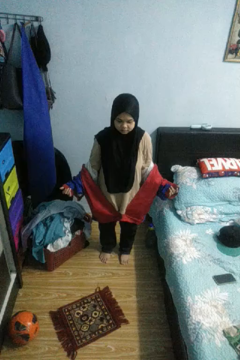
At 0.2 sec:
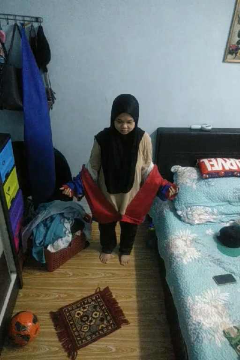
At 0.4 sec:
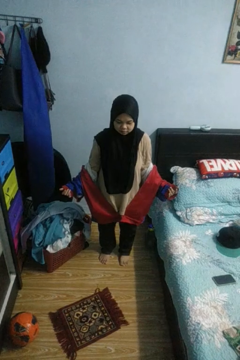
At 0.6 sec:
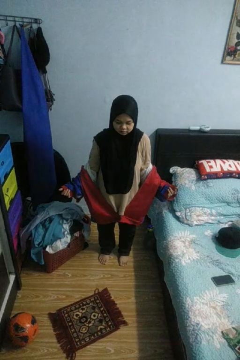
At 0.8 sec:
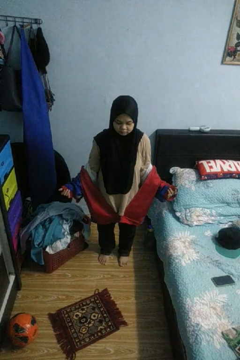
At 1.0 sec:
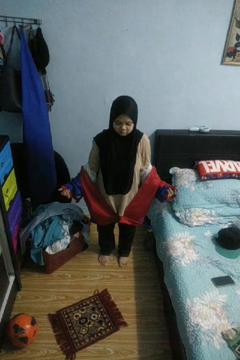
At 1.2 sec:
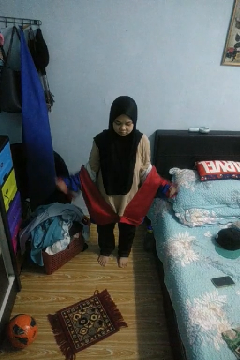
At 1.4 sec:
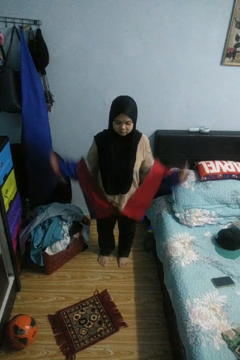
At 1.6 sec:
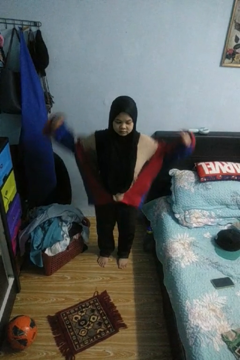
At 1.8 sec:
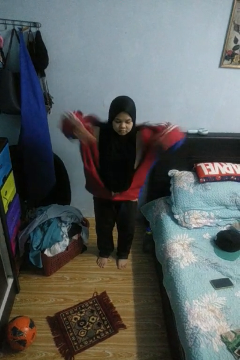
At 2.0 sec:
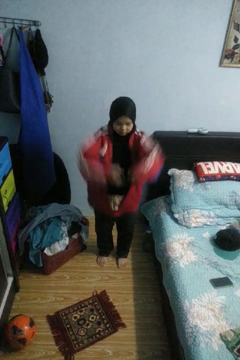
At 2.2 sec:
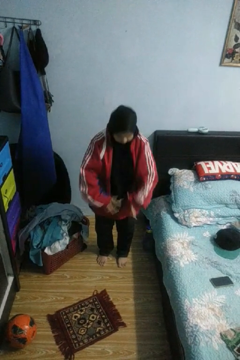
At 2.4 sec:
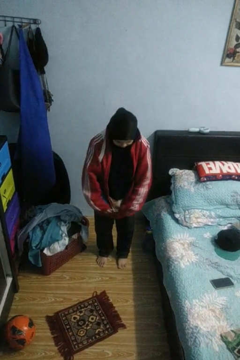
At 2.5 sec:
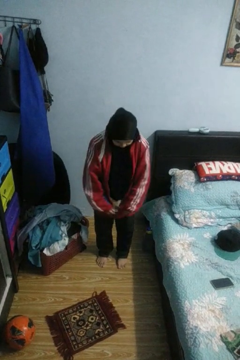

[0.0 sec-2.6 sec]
person puts on jacket

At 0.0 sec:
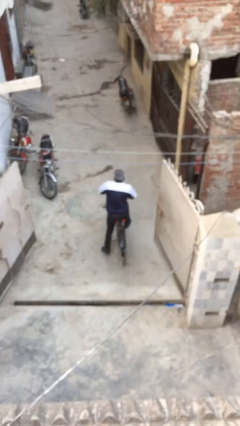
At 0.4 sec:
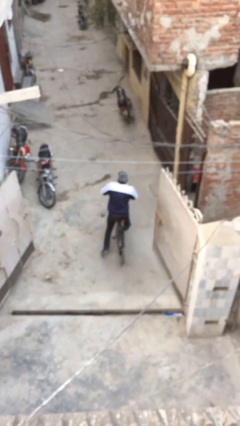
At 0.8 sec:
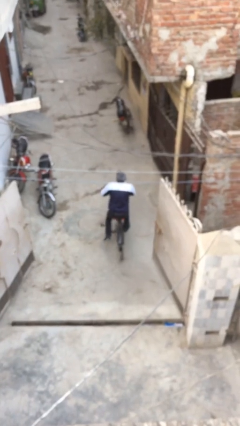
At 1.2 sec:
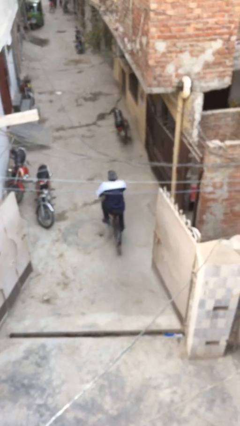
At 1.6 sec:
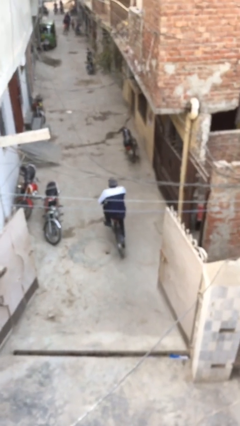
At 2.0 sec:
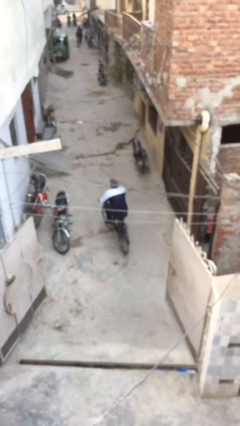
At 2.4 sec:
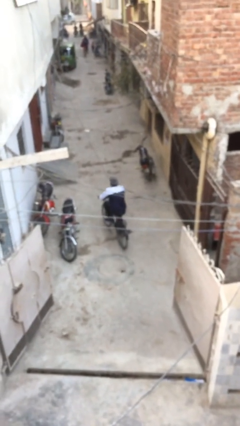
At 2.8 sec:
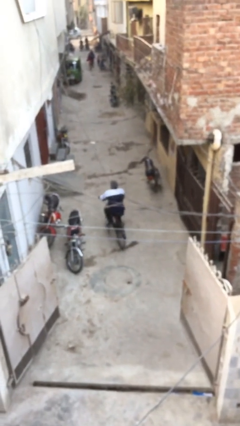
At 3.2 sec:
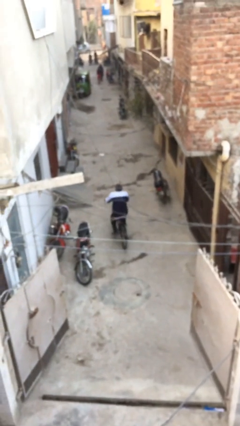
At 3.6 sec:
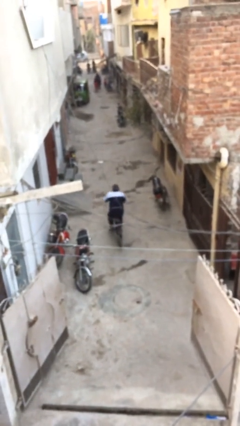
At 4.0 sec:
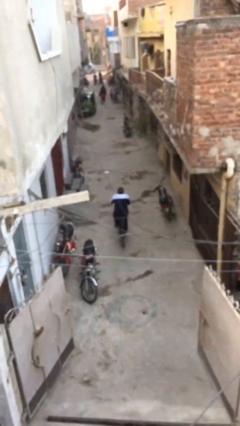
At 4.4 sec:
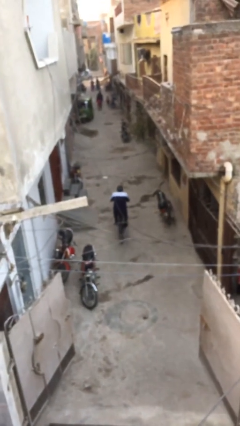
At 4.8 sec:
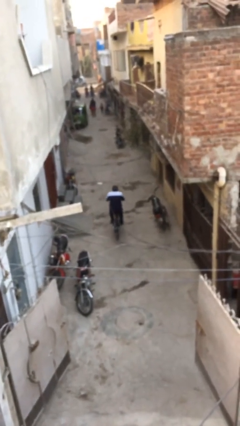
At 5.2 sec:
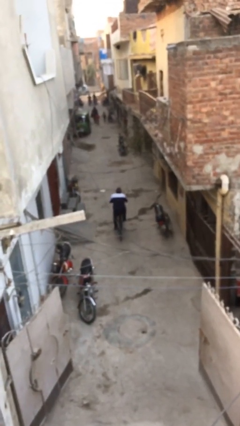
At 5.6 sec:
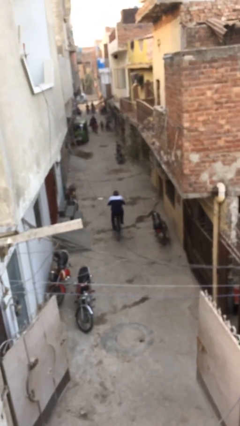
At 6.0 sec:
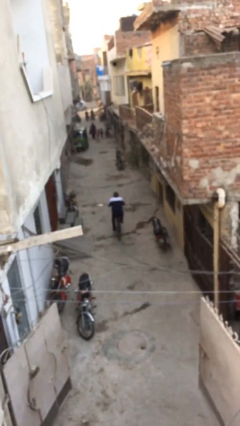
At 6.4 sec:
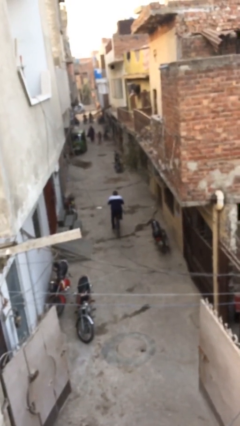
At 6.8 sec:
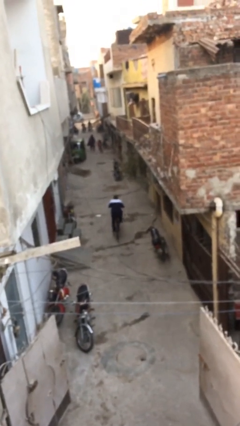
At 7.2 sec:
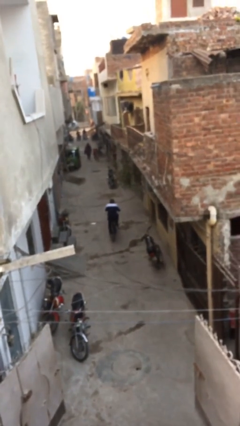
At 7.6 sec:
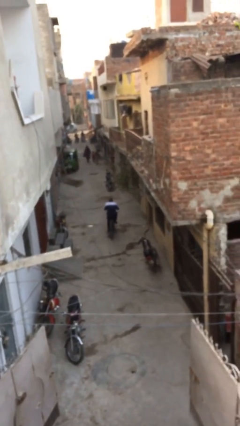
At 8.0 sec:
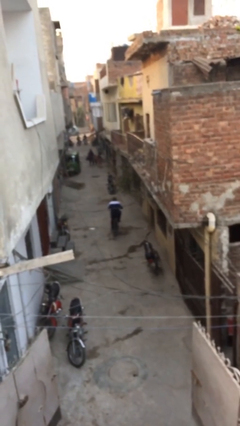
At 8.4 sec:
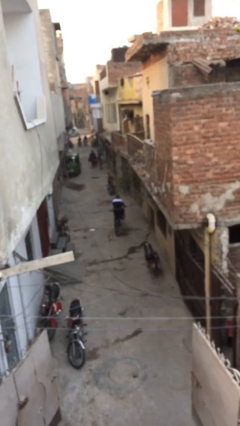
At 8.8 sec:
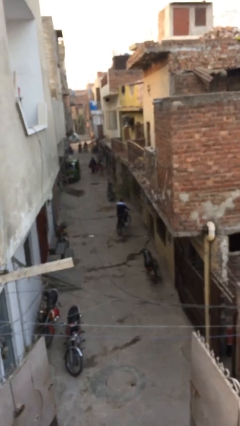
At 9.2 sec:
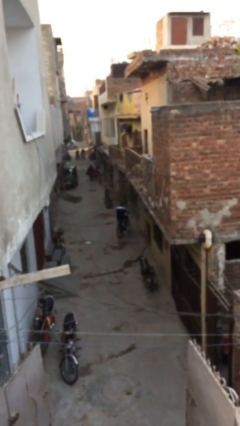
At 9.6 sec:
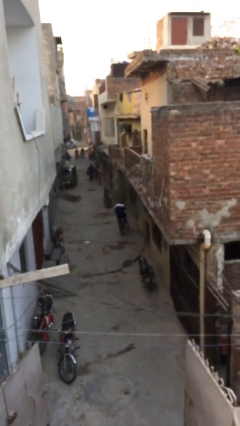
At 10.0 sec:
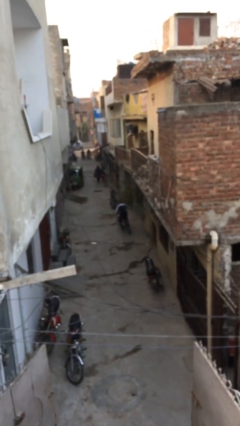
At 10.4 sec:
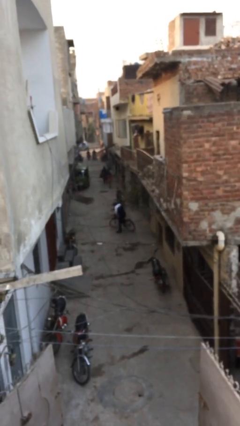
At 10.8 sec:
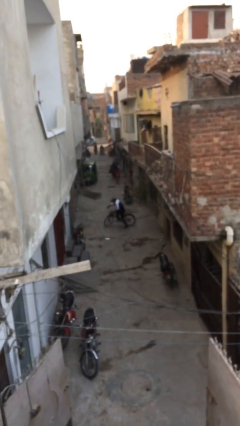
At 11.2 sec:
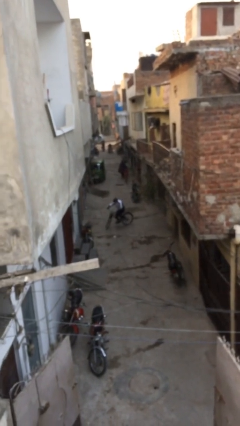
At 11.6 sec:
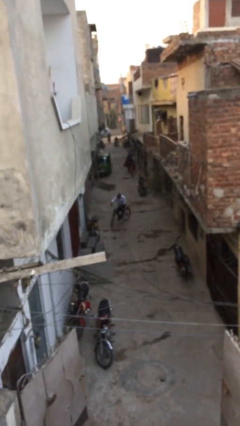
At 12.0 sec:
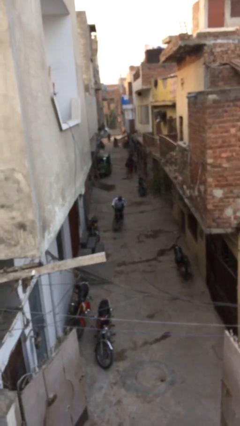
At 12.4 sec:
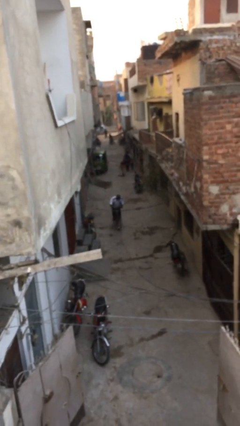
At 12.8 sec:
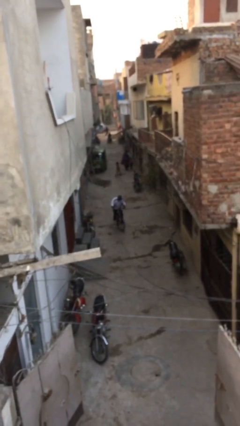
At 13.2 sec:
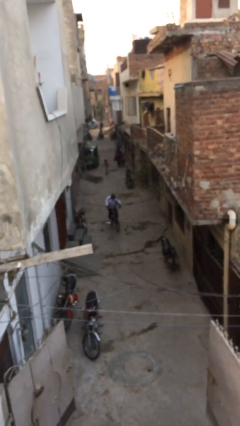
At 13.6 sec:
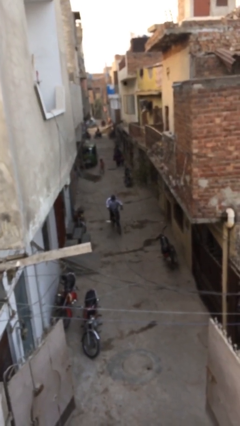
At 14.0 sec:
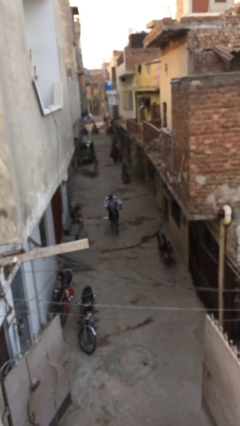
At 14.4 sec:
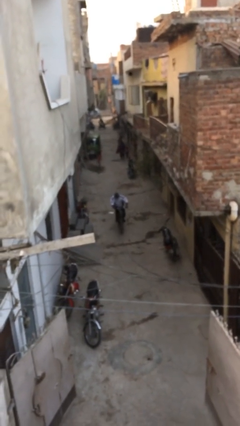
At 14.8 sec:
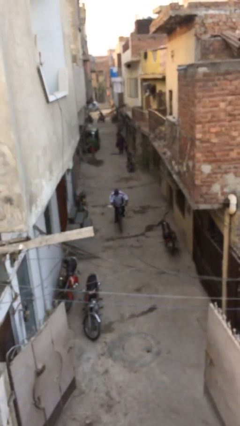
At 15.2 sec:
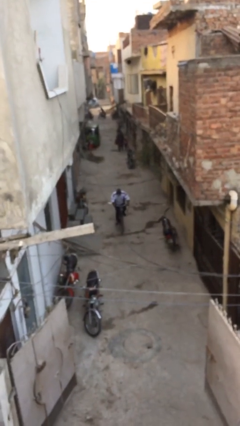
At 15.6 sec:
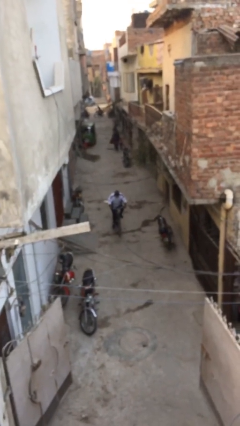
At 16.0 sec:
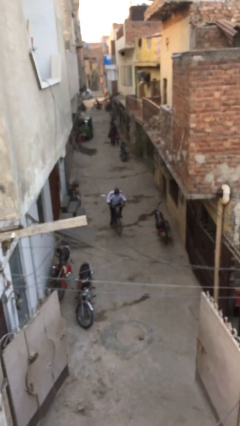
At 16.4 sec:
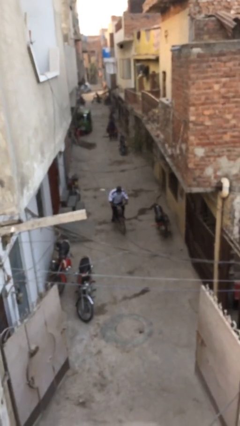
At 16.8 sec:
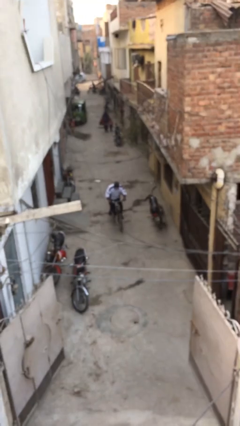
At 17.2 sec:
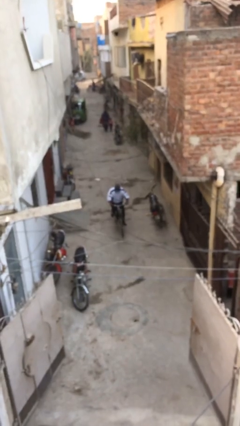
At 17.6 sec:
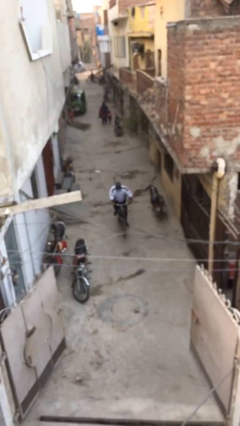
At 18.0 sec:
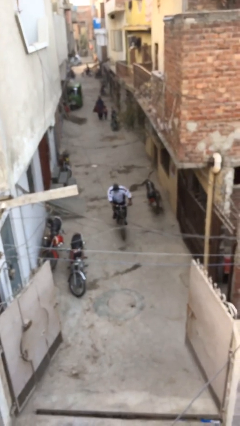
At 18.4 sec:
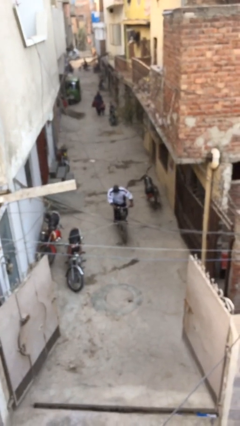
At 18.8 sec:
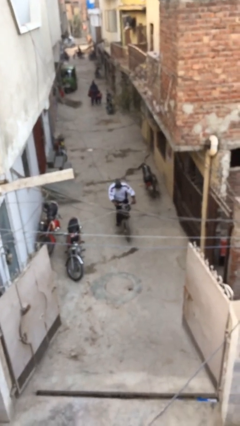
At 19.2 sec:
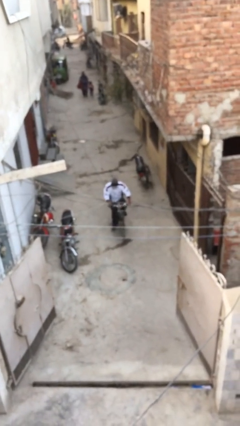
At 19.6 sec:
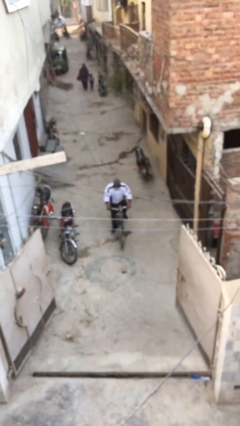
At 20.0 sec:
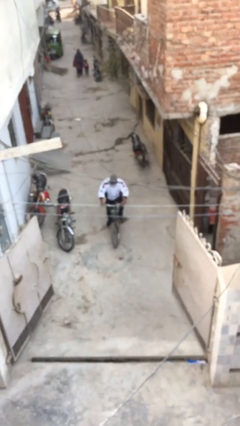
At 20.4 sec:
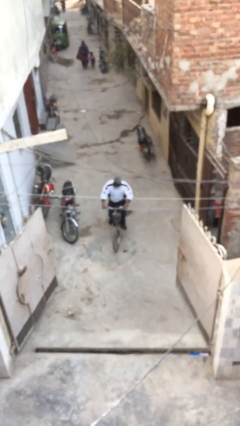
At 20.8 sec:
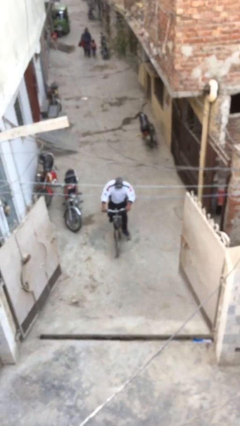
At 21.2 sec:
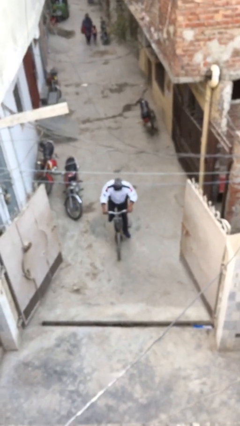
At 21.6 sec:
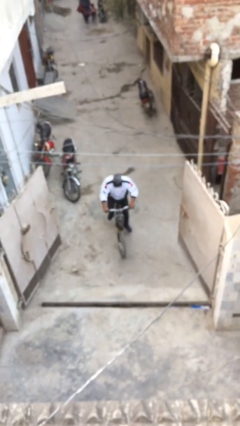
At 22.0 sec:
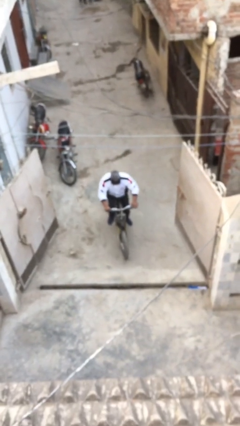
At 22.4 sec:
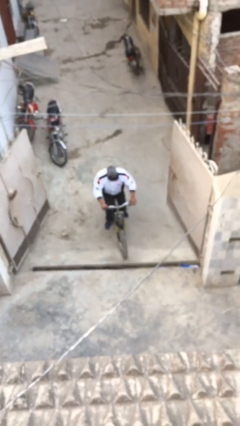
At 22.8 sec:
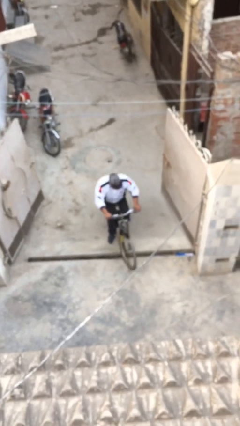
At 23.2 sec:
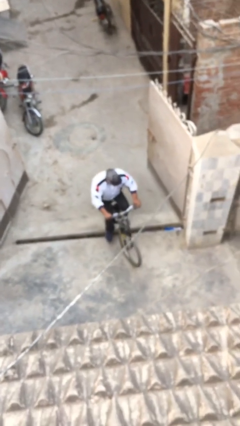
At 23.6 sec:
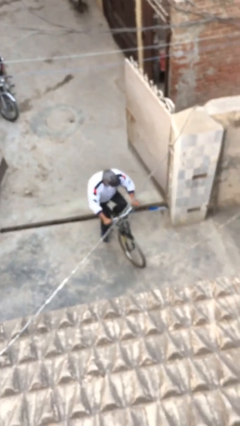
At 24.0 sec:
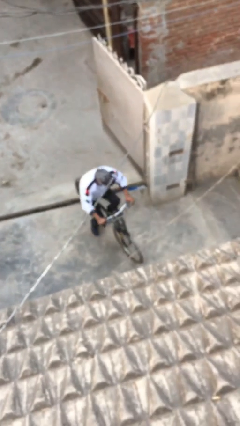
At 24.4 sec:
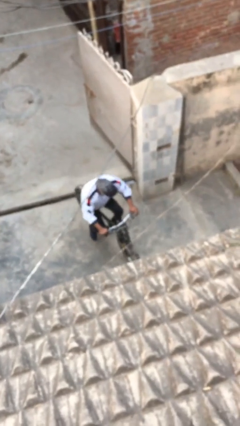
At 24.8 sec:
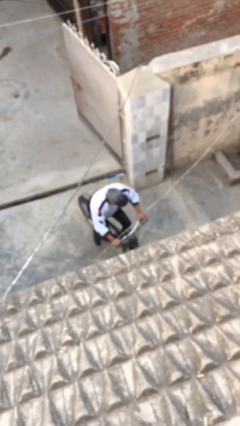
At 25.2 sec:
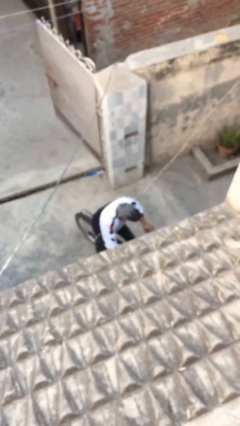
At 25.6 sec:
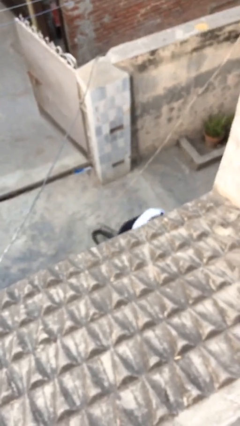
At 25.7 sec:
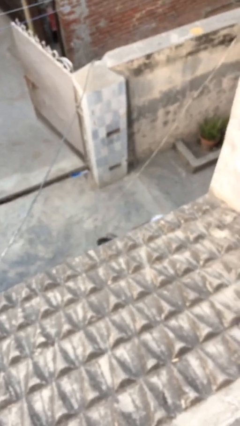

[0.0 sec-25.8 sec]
person rides bicycle

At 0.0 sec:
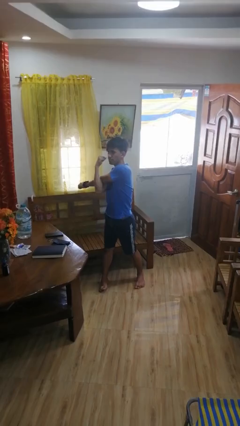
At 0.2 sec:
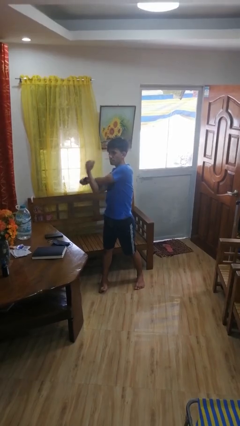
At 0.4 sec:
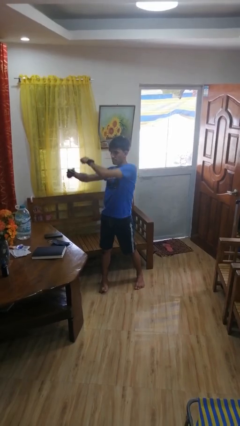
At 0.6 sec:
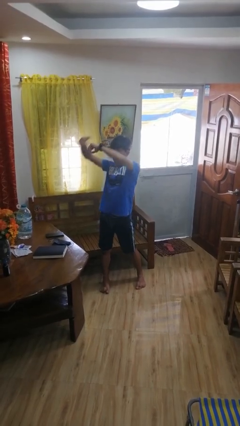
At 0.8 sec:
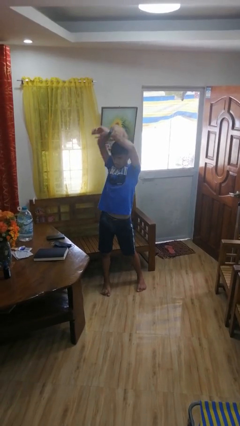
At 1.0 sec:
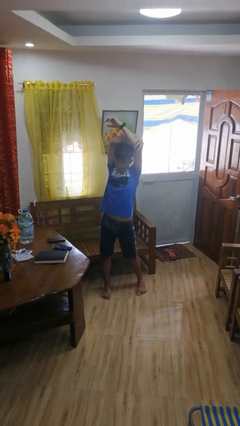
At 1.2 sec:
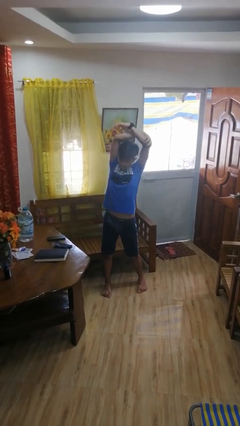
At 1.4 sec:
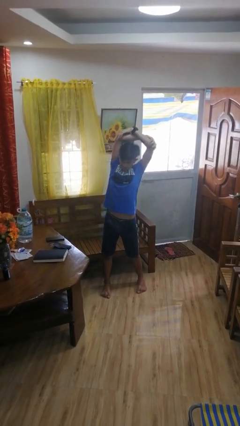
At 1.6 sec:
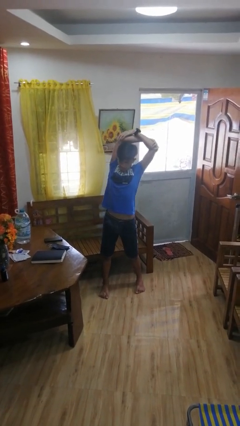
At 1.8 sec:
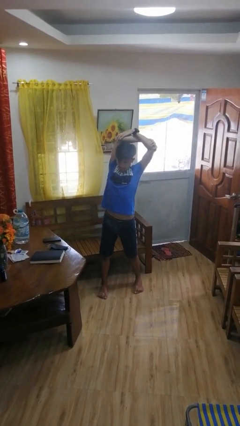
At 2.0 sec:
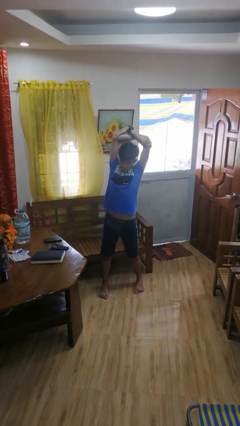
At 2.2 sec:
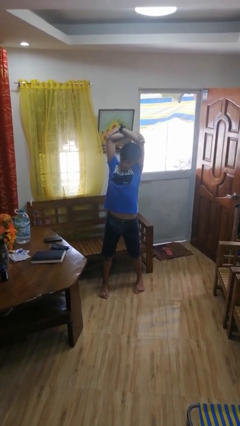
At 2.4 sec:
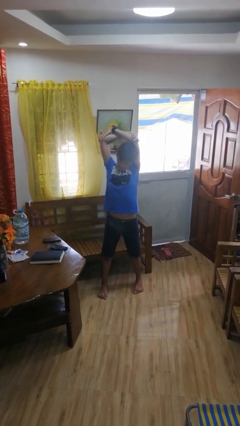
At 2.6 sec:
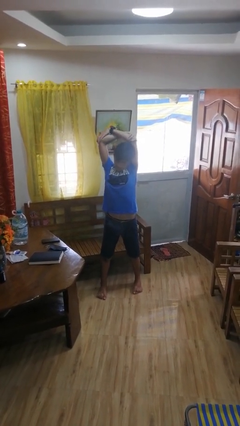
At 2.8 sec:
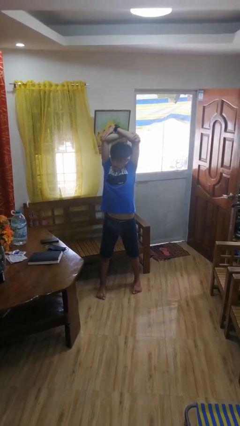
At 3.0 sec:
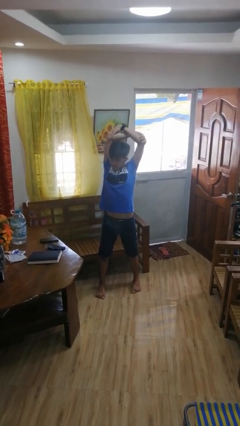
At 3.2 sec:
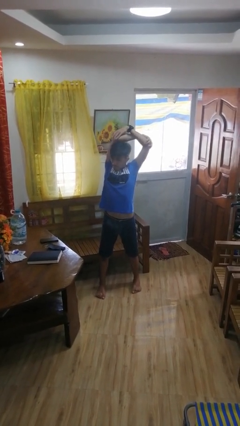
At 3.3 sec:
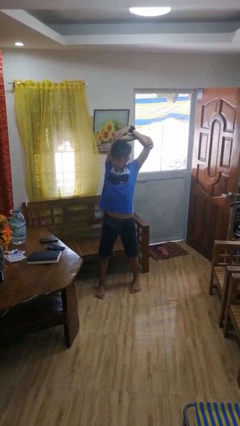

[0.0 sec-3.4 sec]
person stretches arms over head
